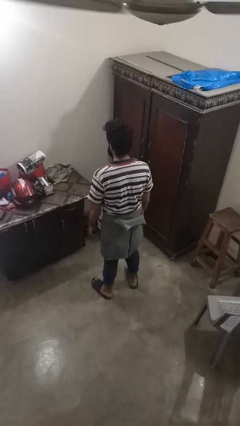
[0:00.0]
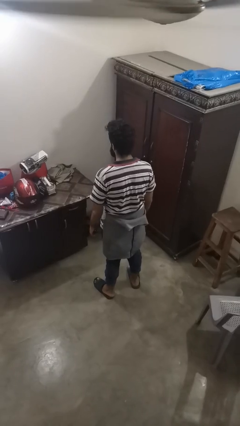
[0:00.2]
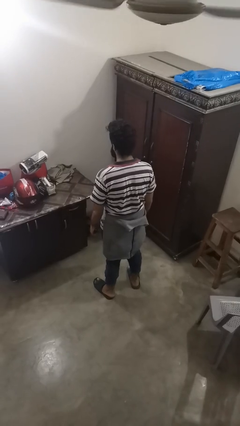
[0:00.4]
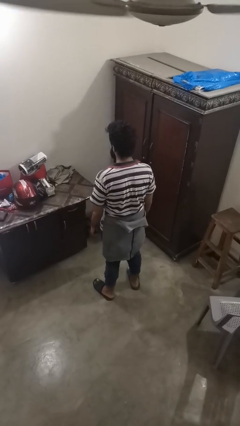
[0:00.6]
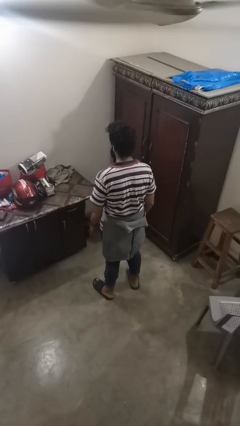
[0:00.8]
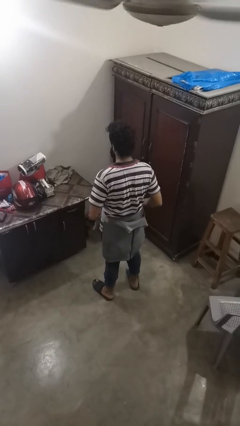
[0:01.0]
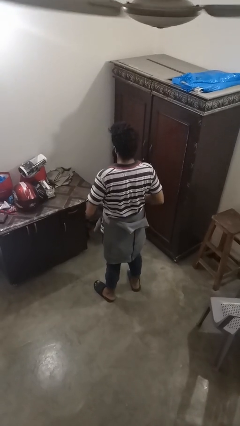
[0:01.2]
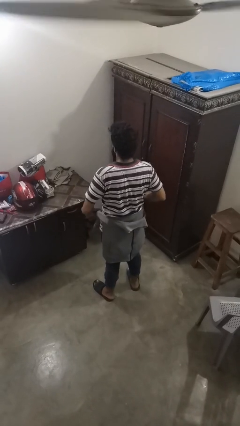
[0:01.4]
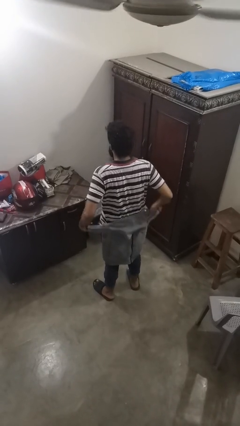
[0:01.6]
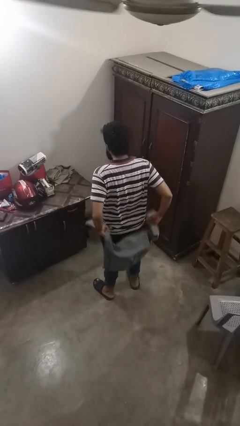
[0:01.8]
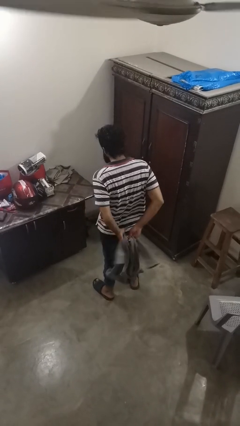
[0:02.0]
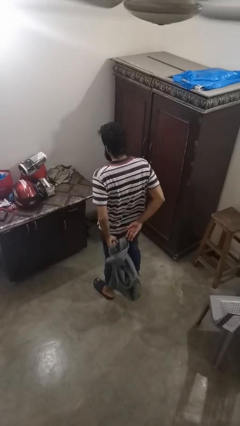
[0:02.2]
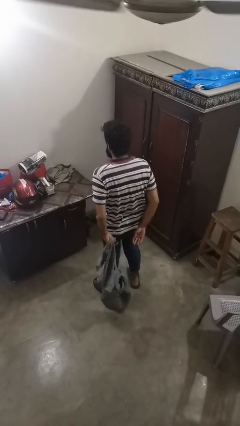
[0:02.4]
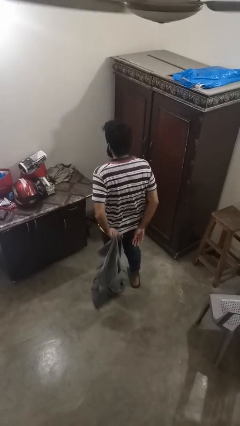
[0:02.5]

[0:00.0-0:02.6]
person unties jacket around waist

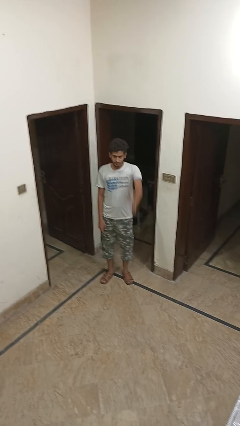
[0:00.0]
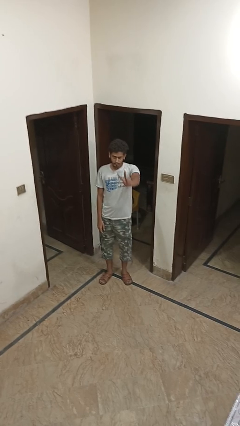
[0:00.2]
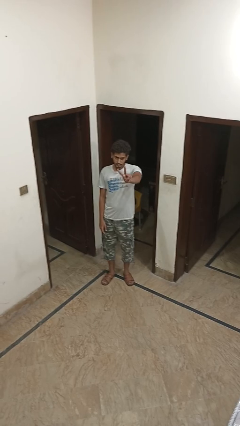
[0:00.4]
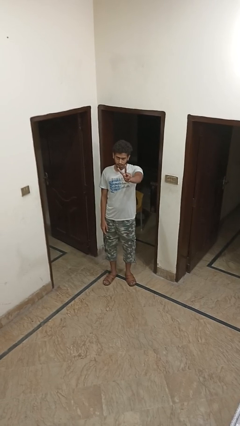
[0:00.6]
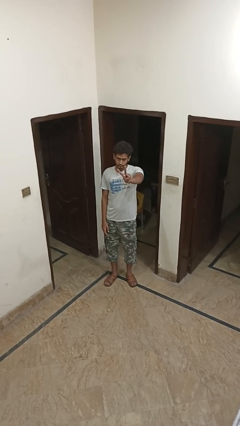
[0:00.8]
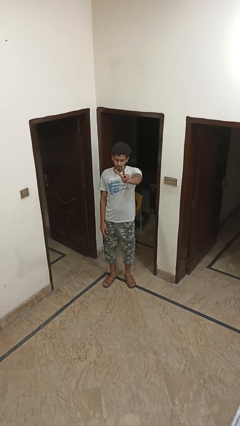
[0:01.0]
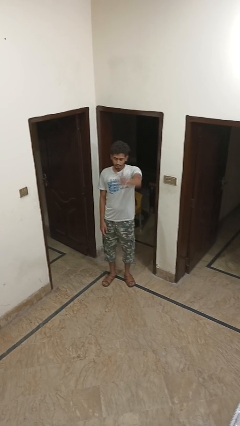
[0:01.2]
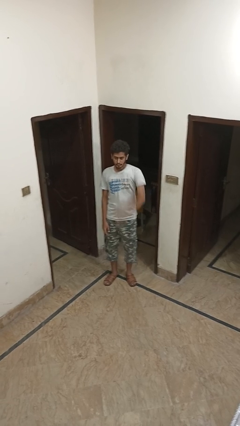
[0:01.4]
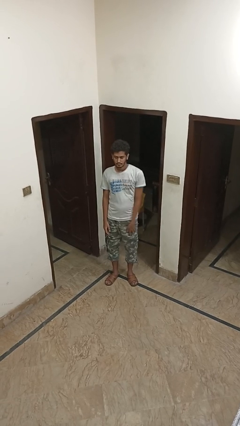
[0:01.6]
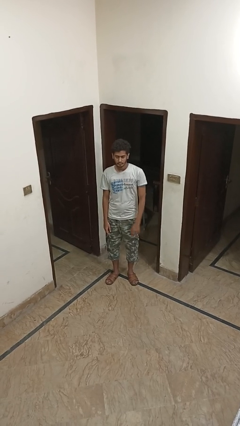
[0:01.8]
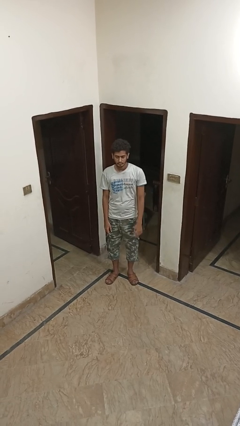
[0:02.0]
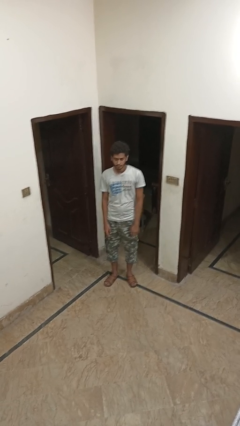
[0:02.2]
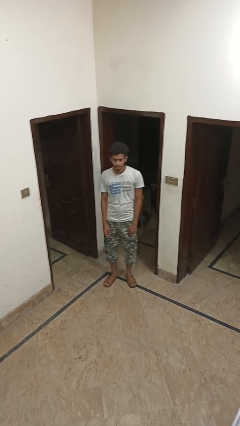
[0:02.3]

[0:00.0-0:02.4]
person gestures peace

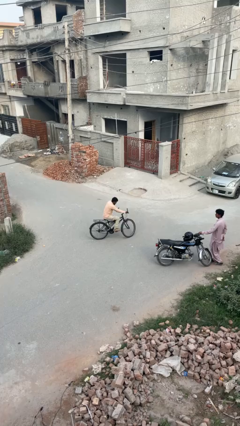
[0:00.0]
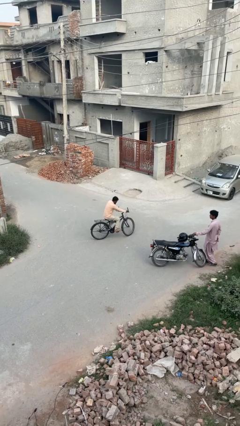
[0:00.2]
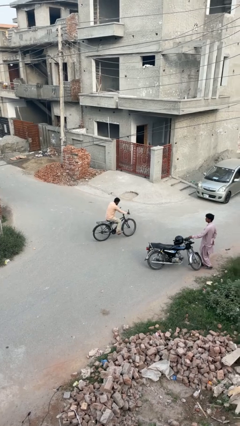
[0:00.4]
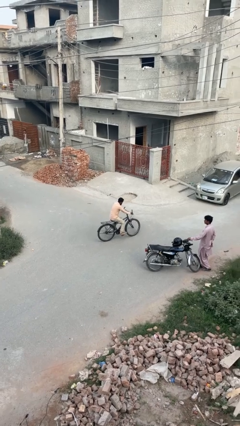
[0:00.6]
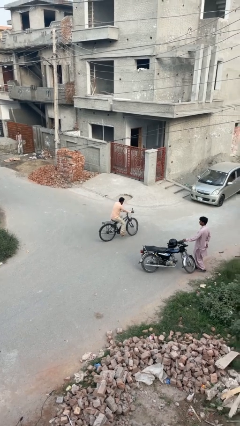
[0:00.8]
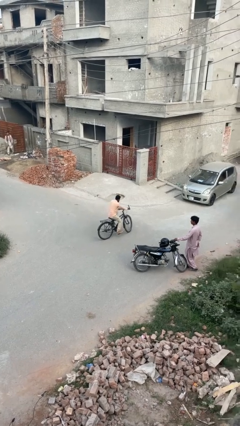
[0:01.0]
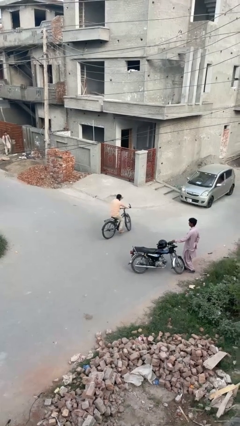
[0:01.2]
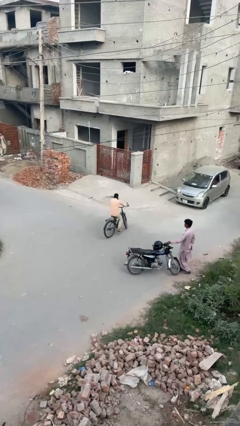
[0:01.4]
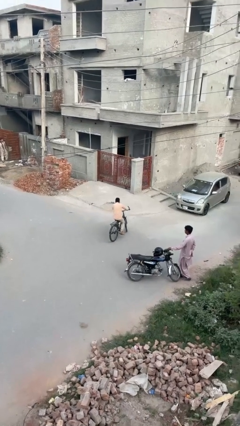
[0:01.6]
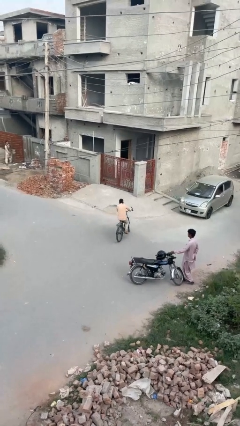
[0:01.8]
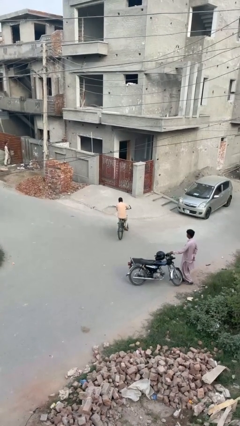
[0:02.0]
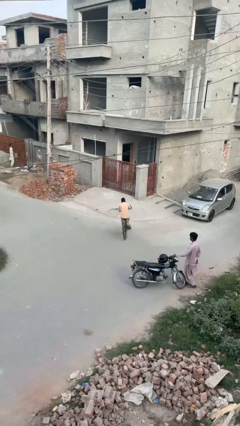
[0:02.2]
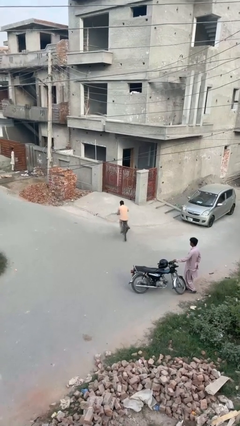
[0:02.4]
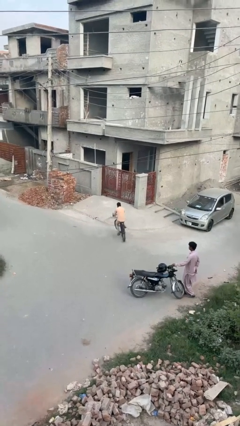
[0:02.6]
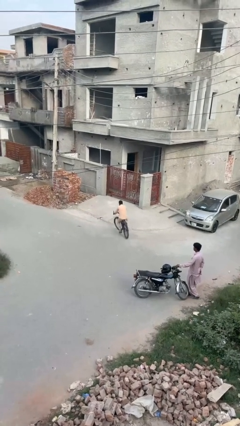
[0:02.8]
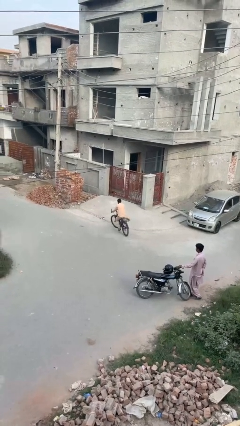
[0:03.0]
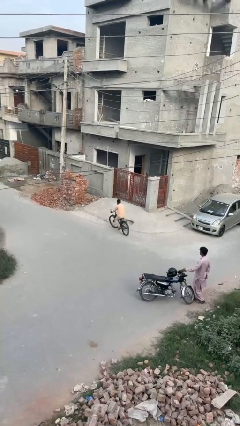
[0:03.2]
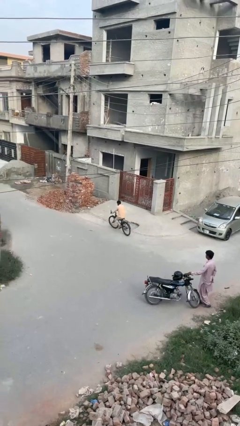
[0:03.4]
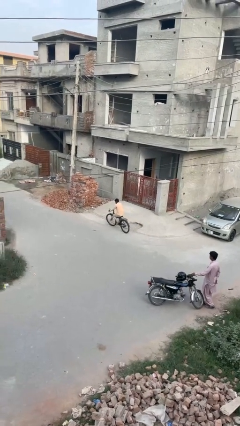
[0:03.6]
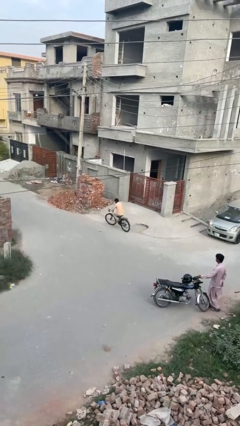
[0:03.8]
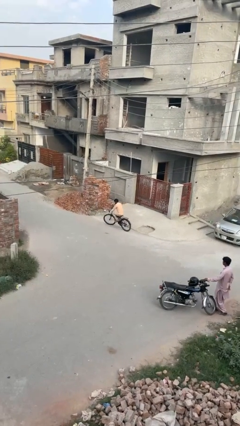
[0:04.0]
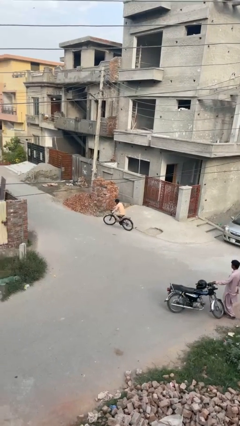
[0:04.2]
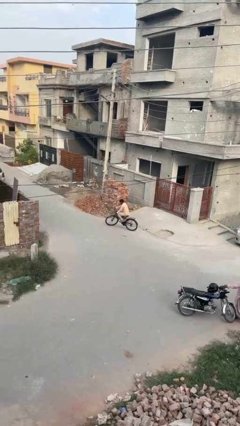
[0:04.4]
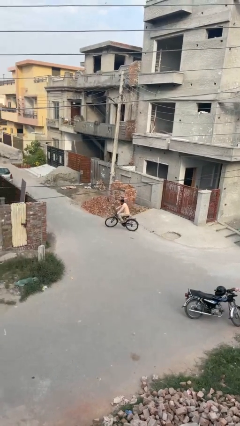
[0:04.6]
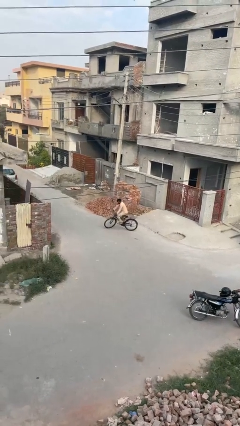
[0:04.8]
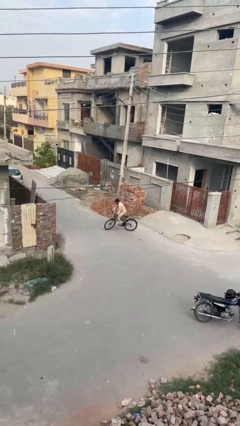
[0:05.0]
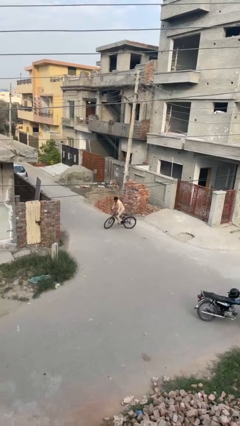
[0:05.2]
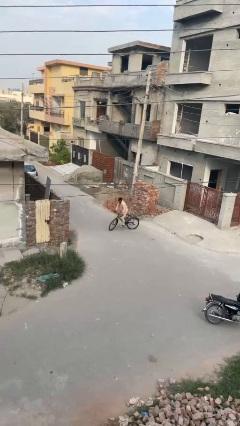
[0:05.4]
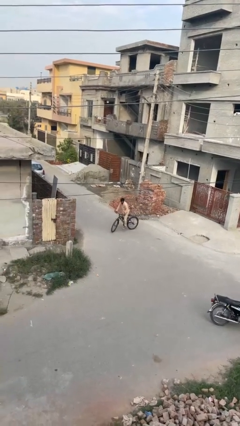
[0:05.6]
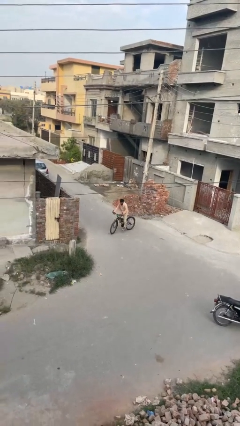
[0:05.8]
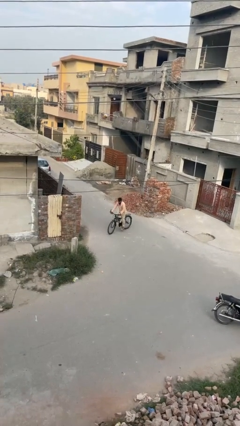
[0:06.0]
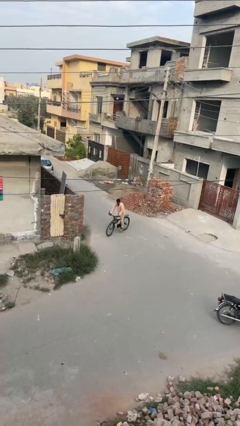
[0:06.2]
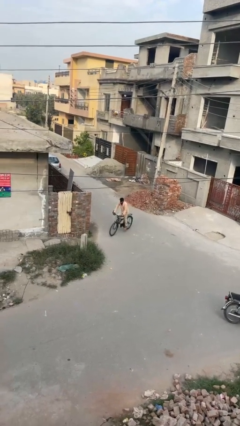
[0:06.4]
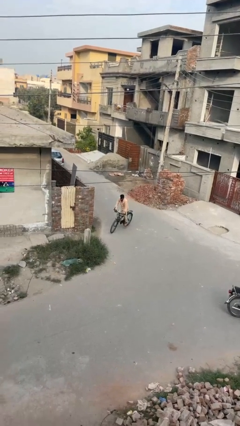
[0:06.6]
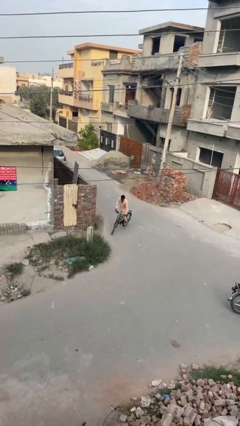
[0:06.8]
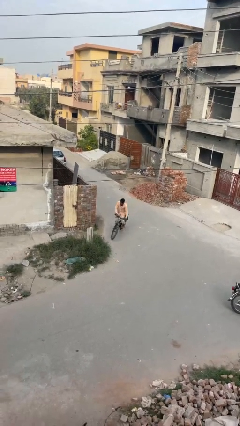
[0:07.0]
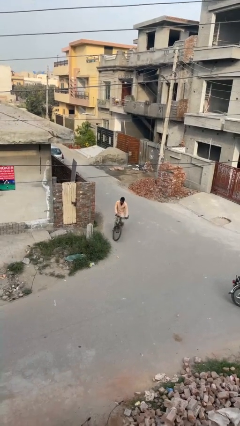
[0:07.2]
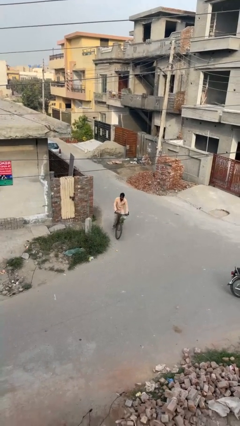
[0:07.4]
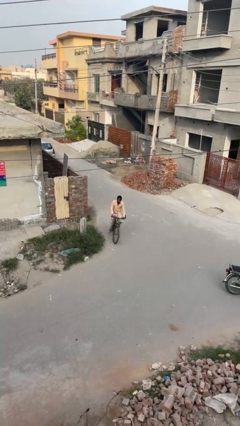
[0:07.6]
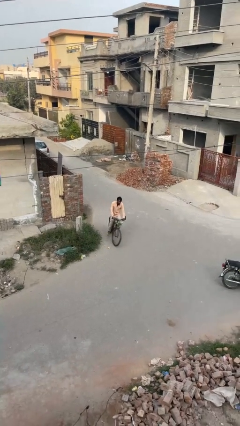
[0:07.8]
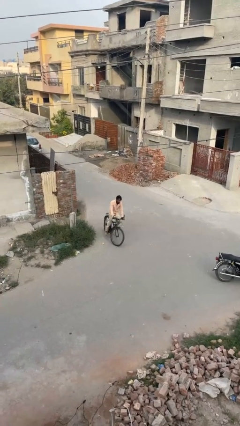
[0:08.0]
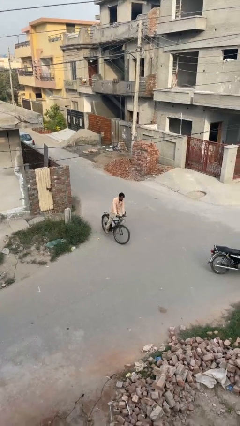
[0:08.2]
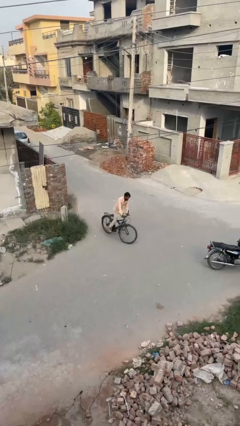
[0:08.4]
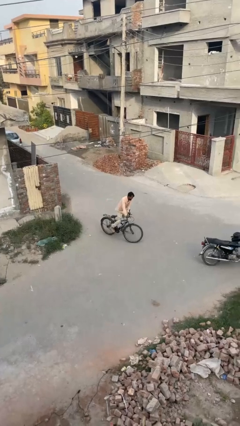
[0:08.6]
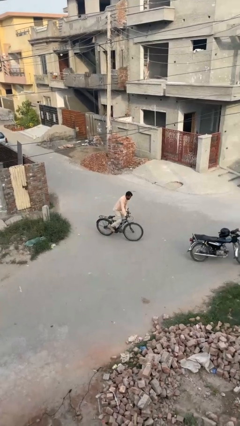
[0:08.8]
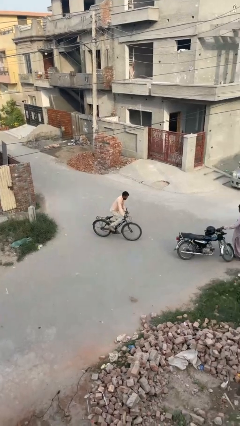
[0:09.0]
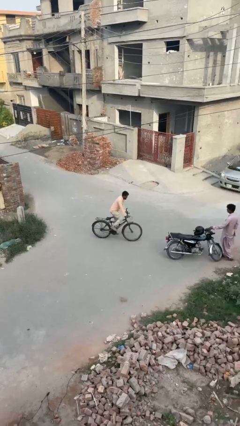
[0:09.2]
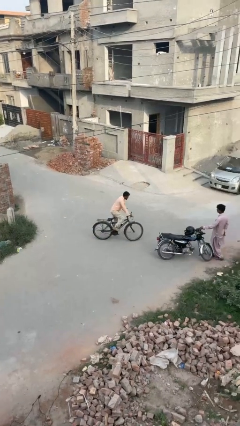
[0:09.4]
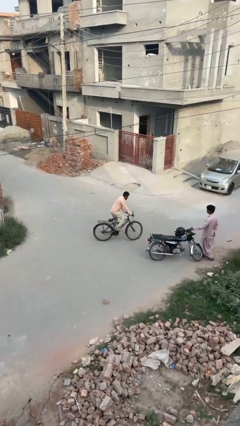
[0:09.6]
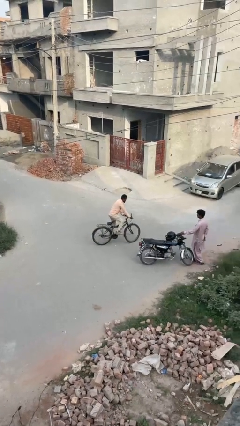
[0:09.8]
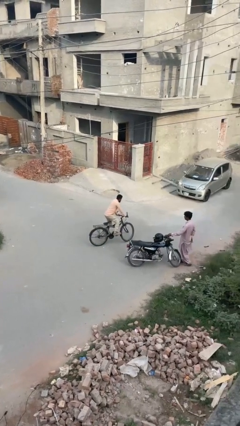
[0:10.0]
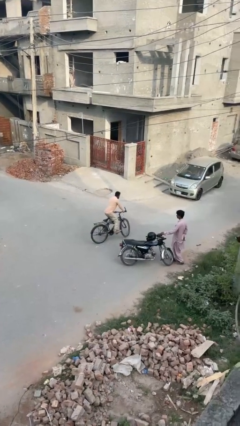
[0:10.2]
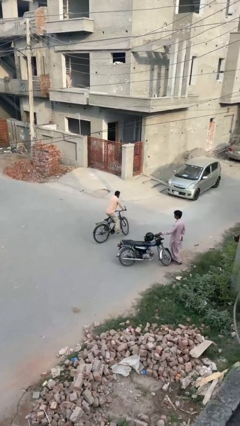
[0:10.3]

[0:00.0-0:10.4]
person rides bicycle

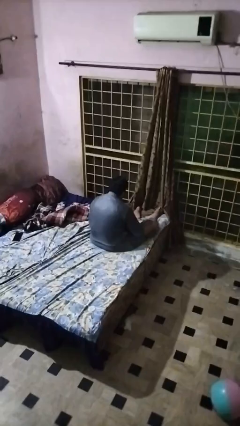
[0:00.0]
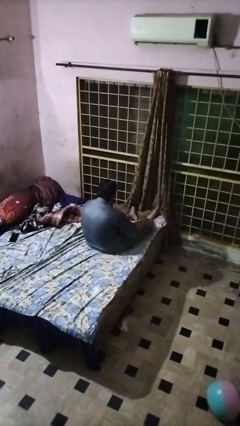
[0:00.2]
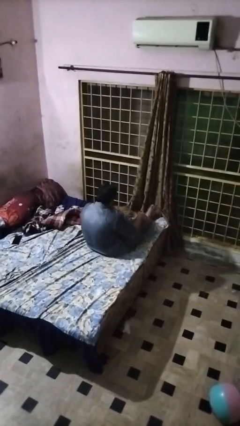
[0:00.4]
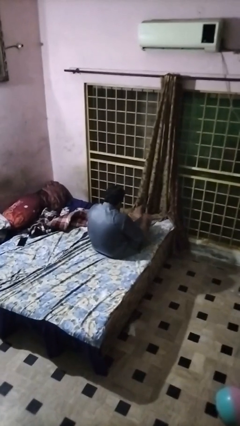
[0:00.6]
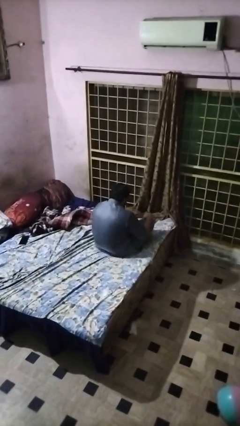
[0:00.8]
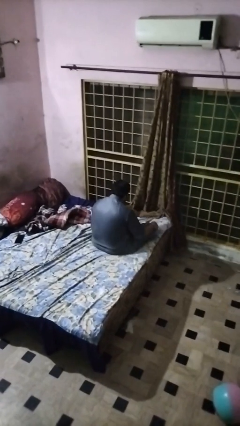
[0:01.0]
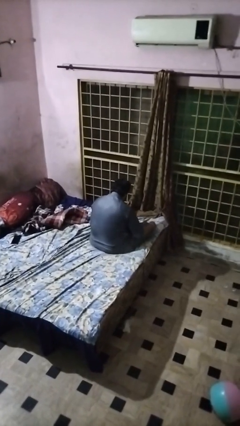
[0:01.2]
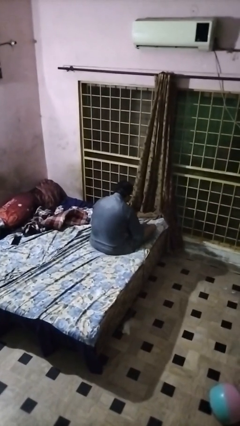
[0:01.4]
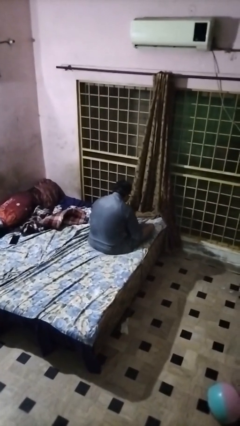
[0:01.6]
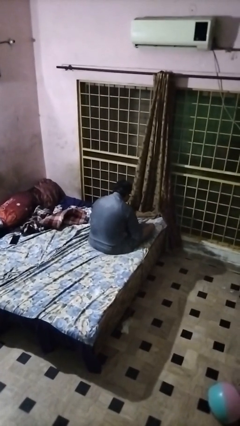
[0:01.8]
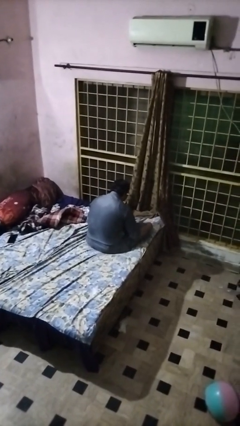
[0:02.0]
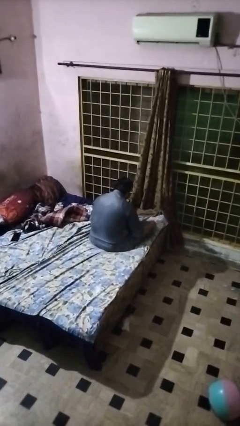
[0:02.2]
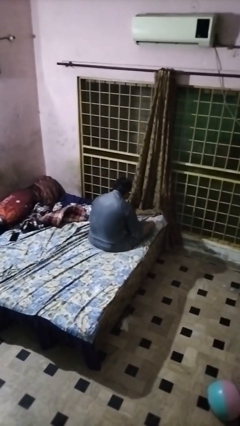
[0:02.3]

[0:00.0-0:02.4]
person crosses legs
